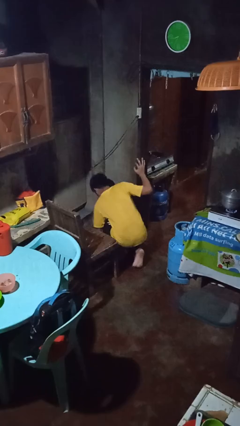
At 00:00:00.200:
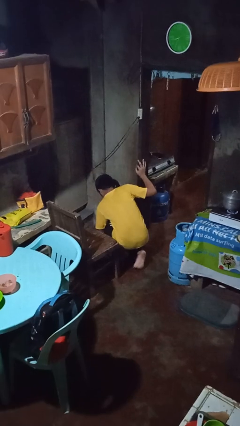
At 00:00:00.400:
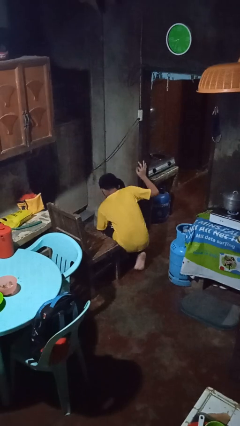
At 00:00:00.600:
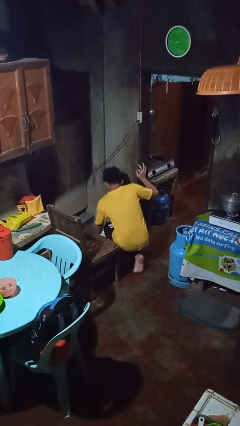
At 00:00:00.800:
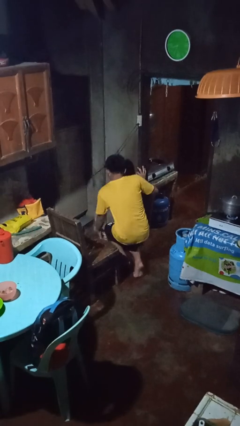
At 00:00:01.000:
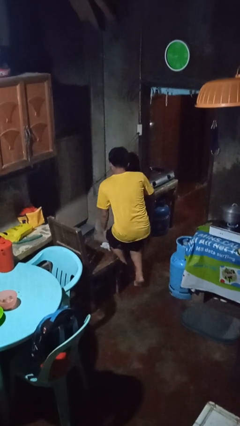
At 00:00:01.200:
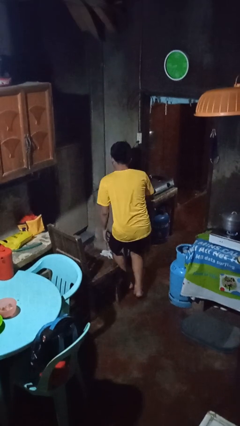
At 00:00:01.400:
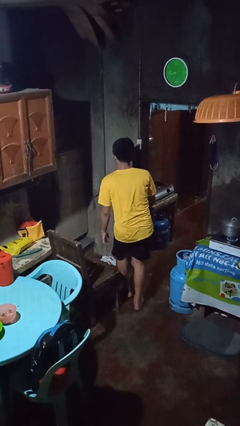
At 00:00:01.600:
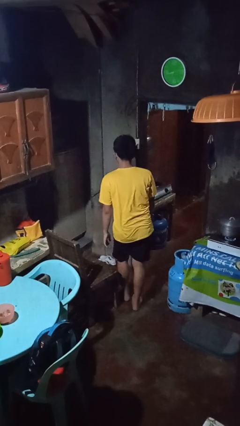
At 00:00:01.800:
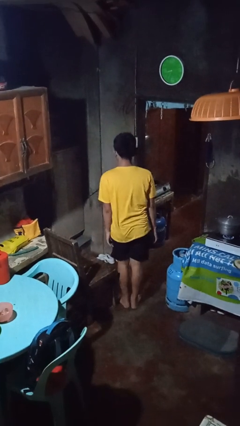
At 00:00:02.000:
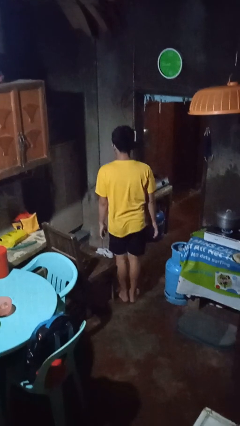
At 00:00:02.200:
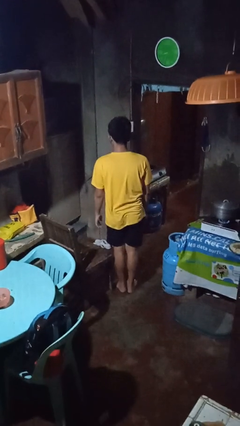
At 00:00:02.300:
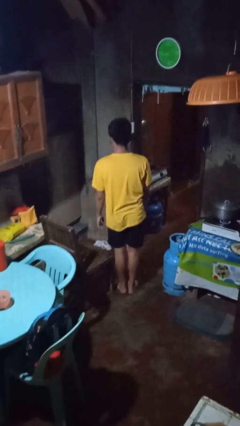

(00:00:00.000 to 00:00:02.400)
person stands up from floor

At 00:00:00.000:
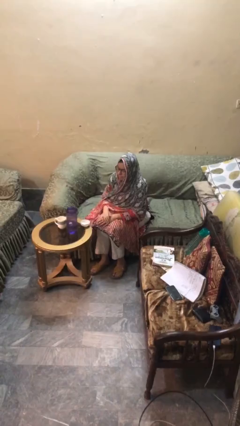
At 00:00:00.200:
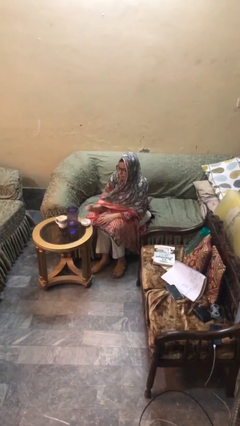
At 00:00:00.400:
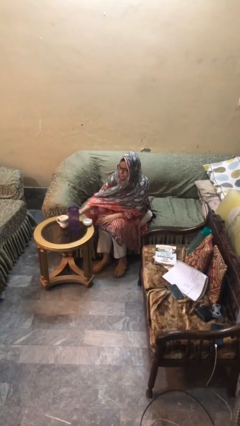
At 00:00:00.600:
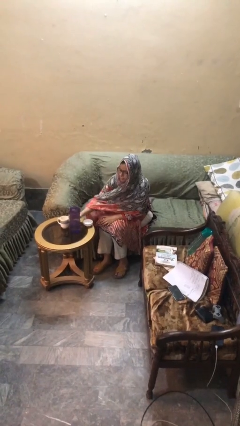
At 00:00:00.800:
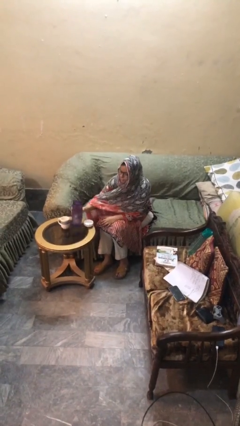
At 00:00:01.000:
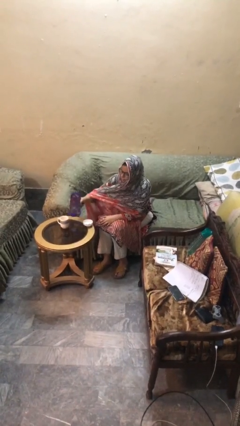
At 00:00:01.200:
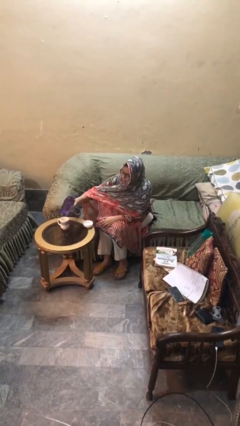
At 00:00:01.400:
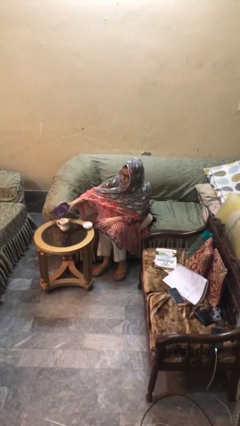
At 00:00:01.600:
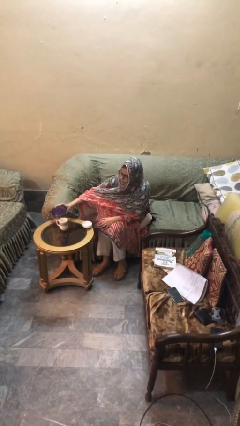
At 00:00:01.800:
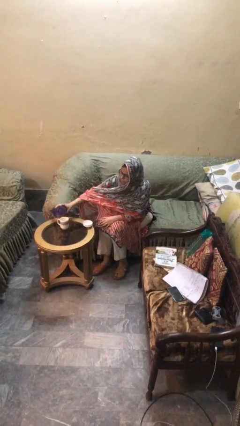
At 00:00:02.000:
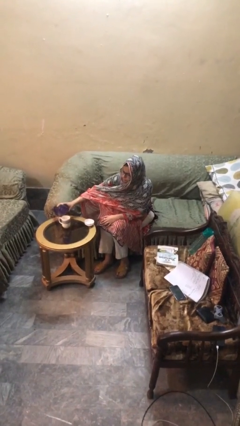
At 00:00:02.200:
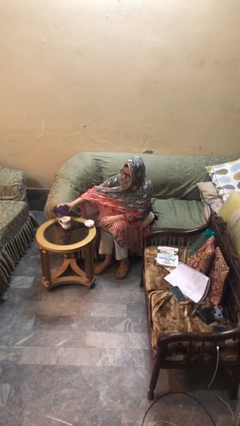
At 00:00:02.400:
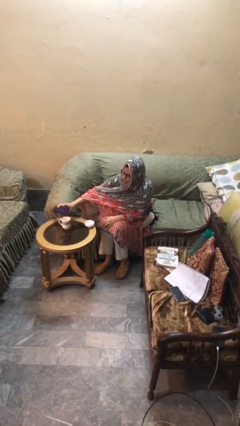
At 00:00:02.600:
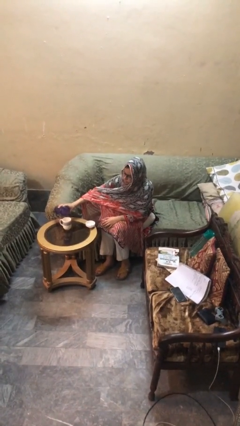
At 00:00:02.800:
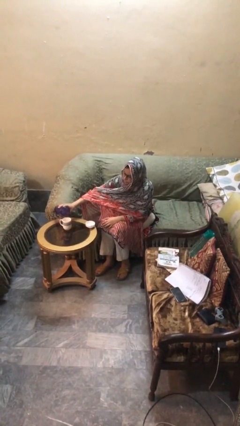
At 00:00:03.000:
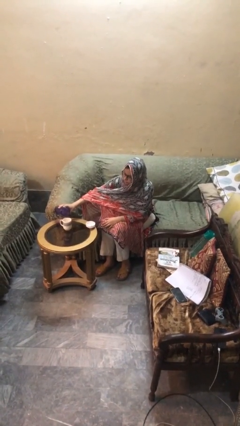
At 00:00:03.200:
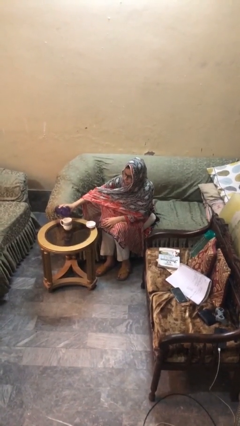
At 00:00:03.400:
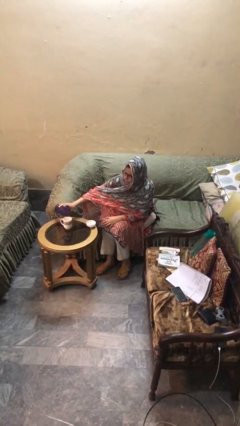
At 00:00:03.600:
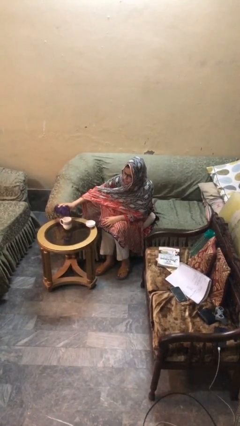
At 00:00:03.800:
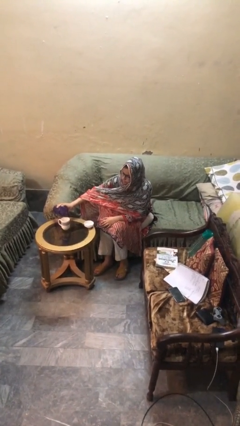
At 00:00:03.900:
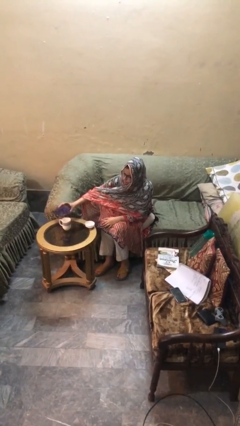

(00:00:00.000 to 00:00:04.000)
person pours liquid into cup

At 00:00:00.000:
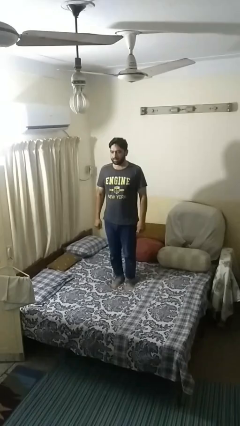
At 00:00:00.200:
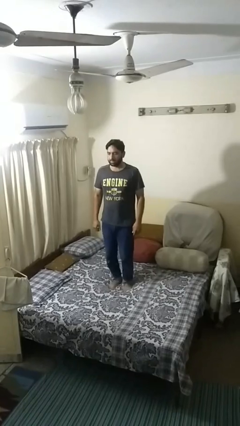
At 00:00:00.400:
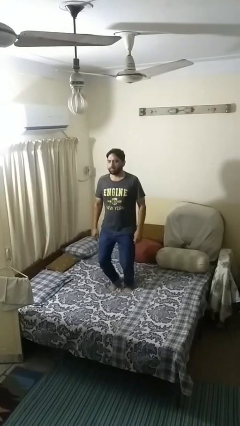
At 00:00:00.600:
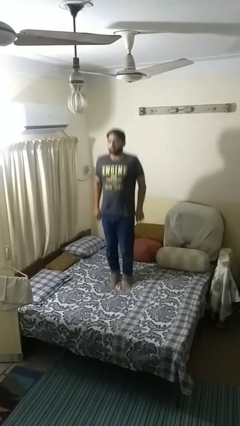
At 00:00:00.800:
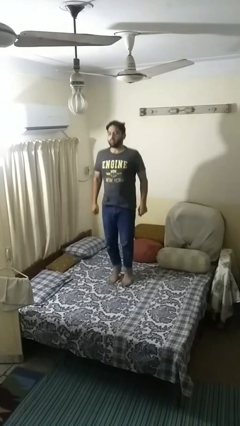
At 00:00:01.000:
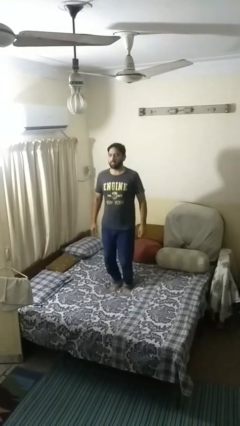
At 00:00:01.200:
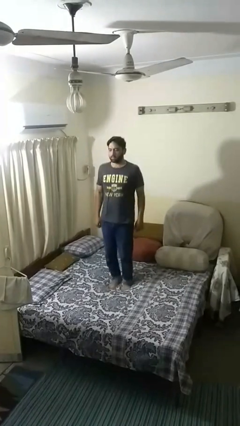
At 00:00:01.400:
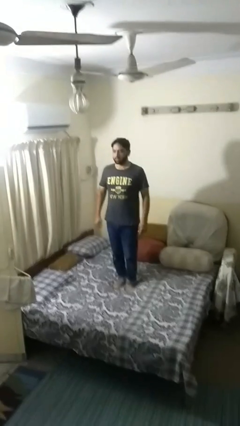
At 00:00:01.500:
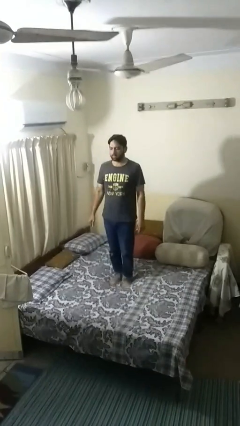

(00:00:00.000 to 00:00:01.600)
person jumps on bed

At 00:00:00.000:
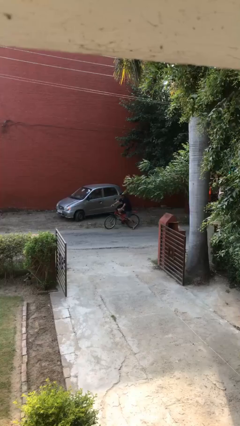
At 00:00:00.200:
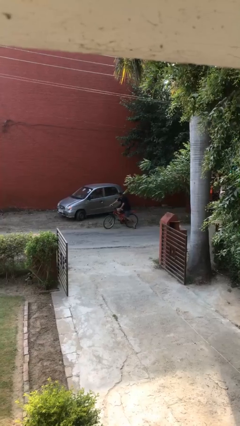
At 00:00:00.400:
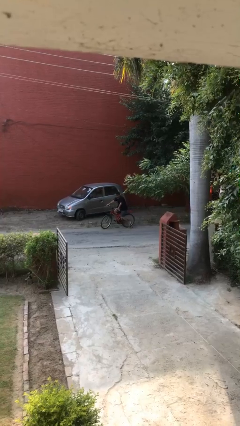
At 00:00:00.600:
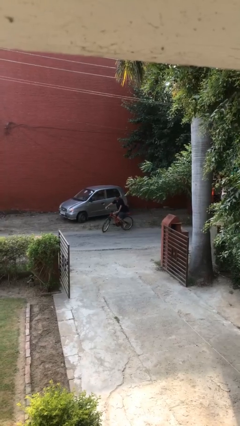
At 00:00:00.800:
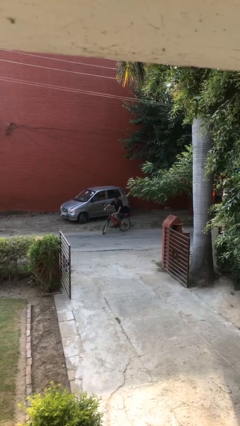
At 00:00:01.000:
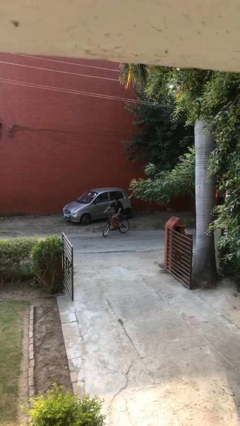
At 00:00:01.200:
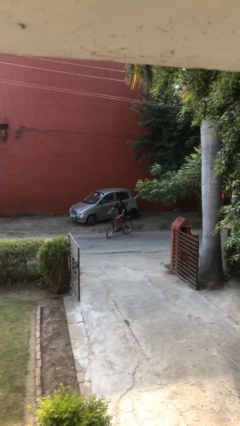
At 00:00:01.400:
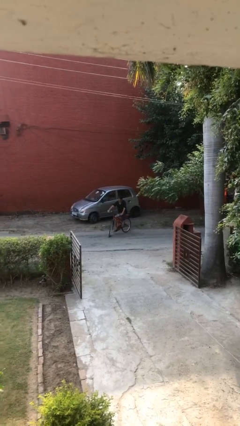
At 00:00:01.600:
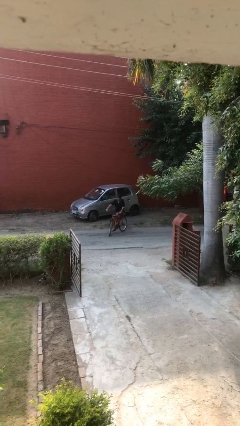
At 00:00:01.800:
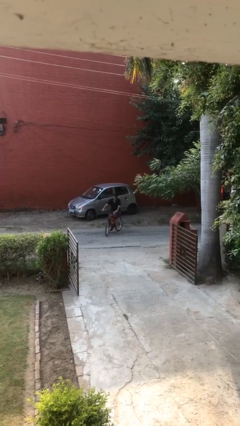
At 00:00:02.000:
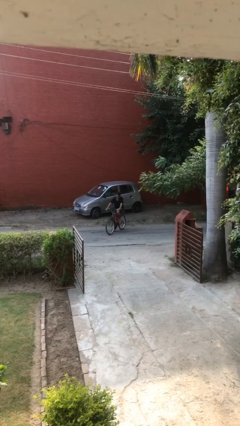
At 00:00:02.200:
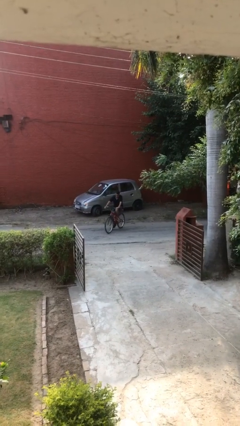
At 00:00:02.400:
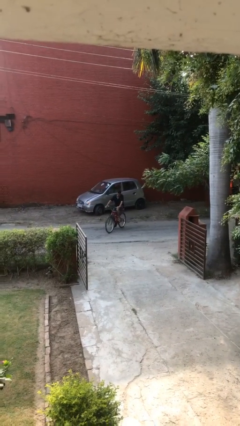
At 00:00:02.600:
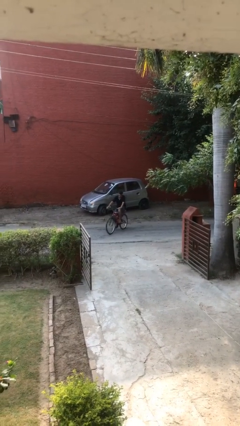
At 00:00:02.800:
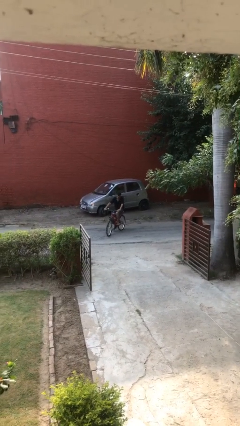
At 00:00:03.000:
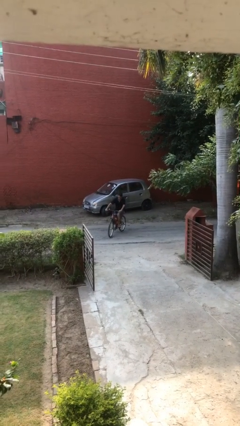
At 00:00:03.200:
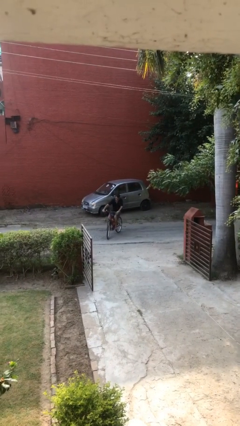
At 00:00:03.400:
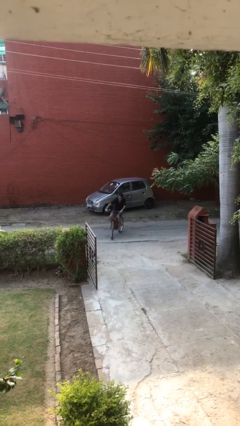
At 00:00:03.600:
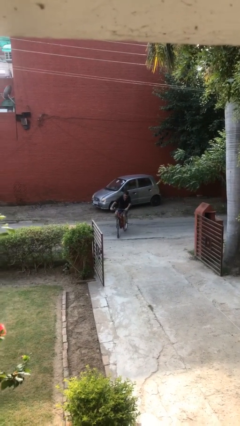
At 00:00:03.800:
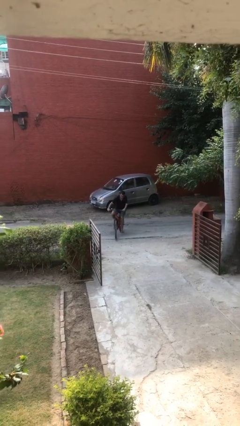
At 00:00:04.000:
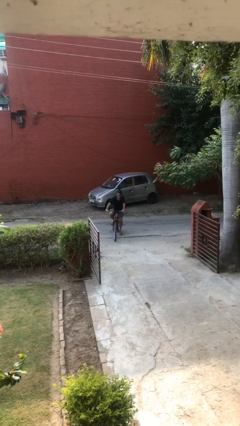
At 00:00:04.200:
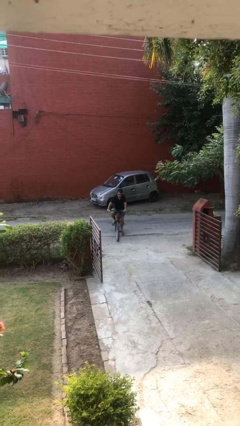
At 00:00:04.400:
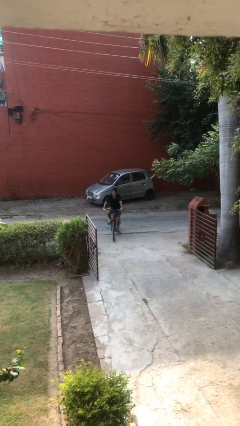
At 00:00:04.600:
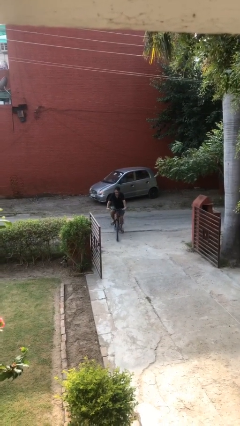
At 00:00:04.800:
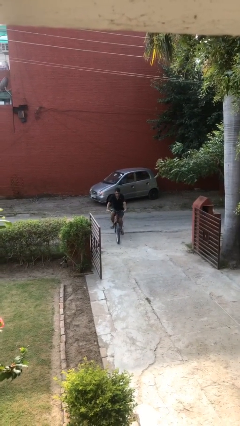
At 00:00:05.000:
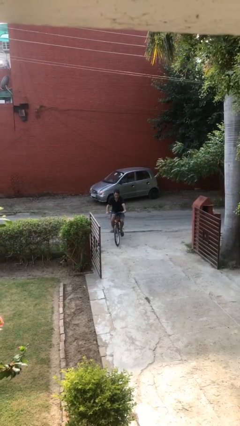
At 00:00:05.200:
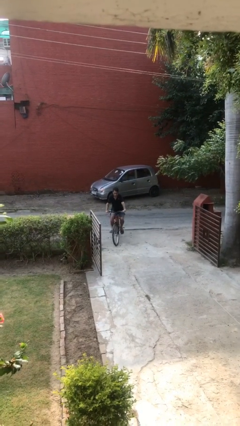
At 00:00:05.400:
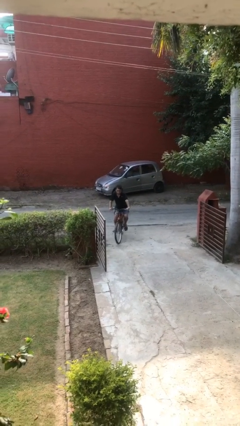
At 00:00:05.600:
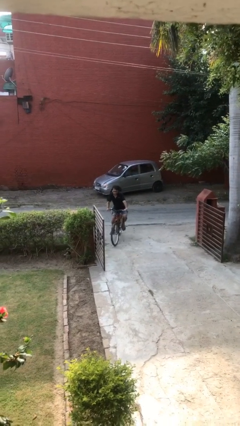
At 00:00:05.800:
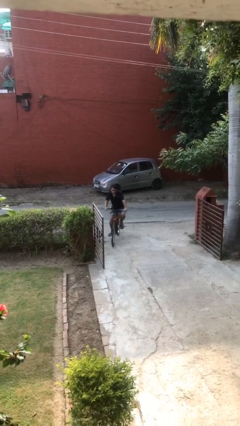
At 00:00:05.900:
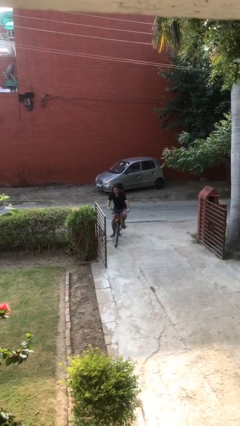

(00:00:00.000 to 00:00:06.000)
person rides bicycle

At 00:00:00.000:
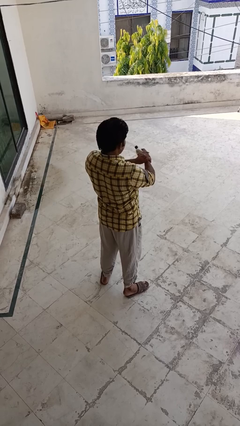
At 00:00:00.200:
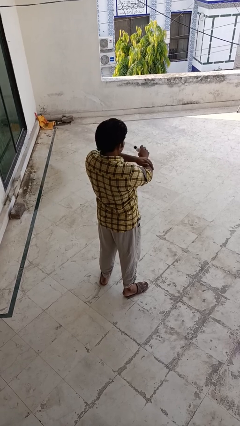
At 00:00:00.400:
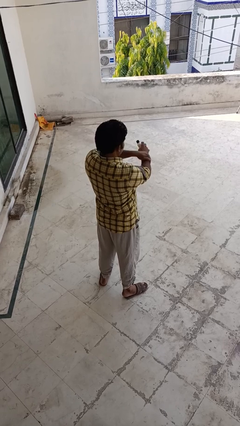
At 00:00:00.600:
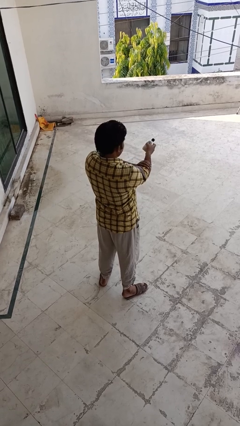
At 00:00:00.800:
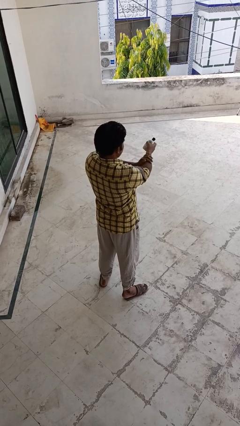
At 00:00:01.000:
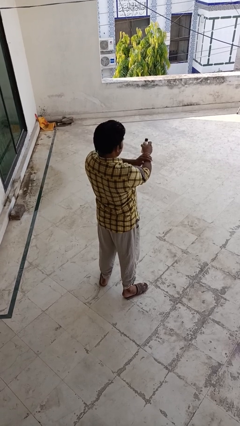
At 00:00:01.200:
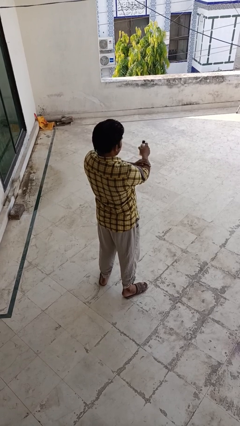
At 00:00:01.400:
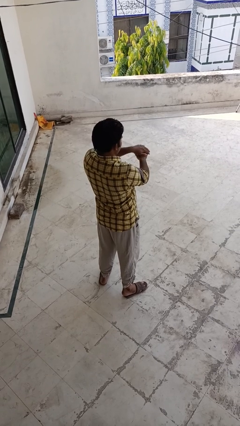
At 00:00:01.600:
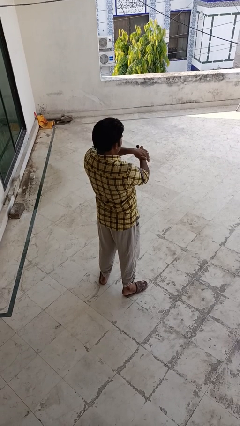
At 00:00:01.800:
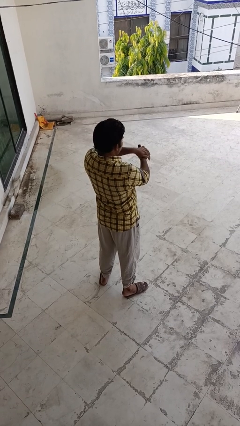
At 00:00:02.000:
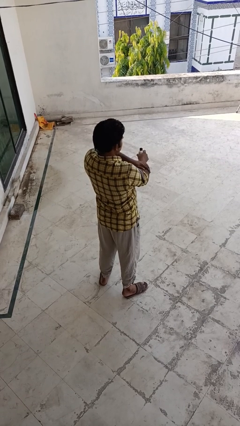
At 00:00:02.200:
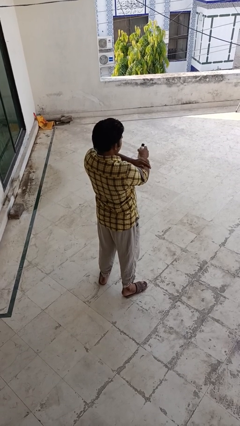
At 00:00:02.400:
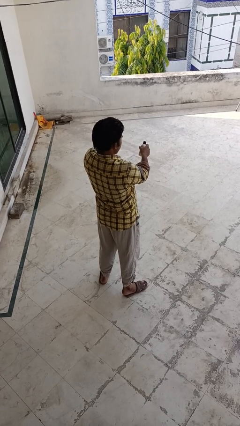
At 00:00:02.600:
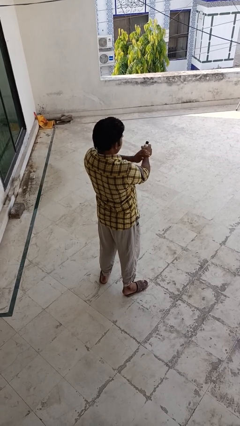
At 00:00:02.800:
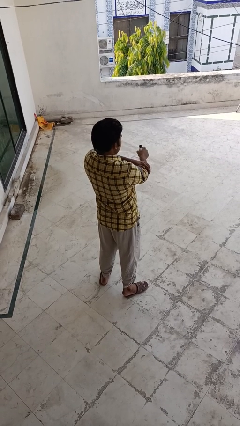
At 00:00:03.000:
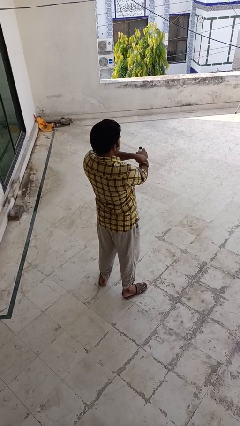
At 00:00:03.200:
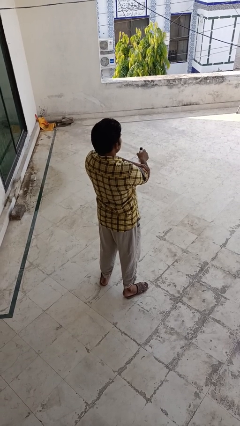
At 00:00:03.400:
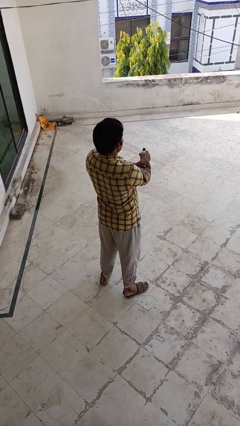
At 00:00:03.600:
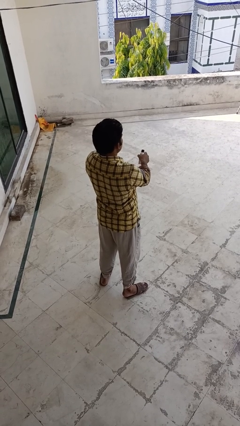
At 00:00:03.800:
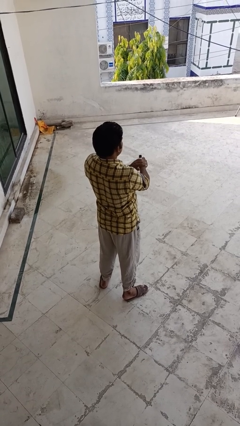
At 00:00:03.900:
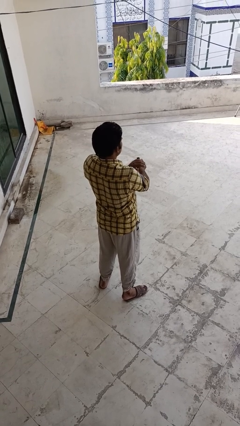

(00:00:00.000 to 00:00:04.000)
person applies sunscreen
